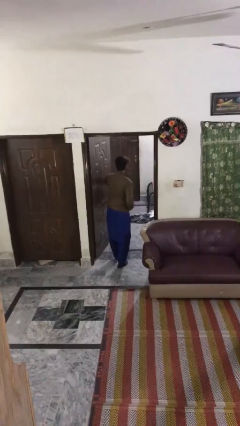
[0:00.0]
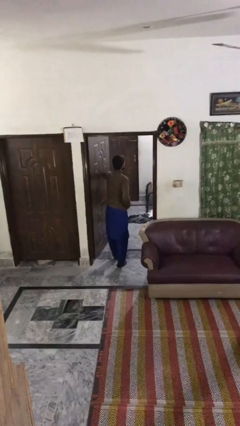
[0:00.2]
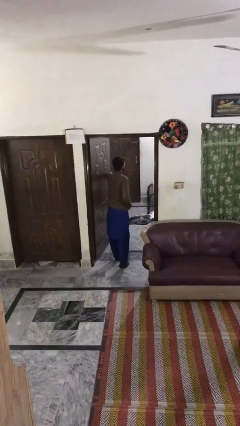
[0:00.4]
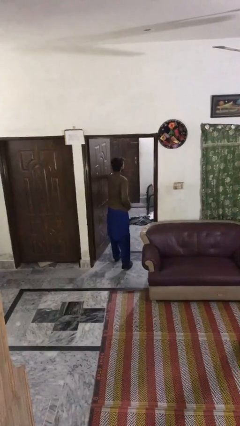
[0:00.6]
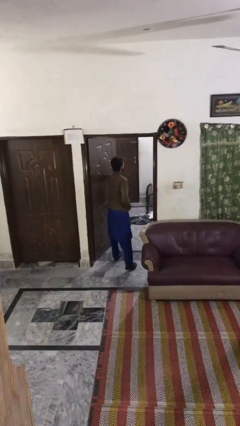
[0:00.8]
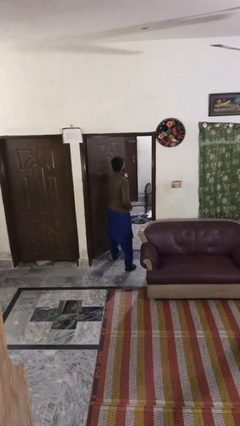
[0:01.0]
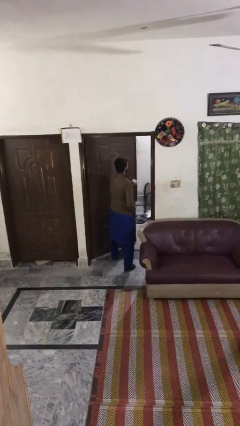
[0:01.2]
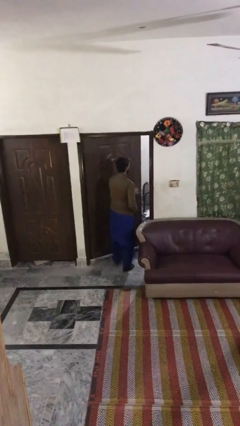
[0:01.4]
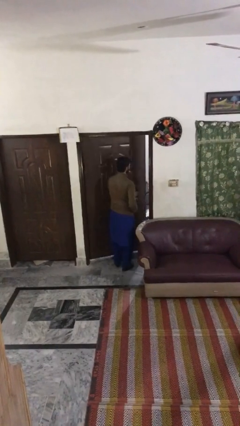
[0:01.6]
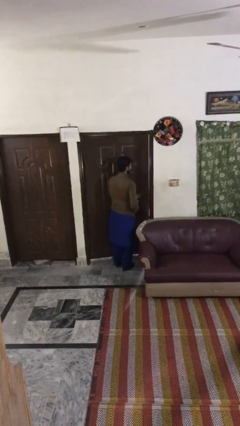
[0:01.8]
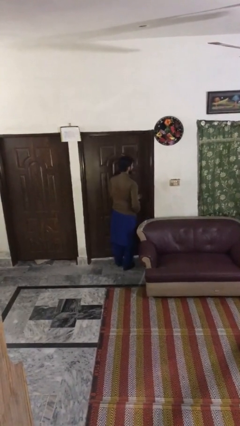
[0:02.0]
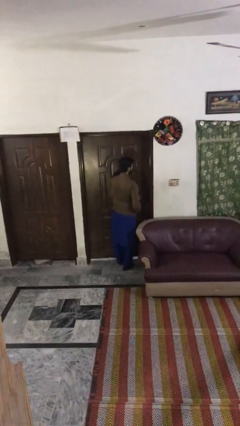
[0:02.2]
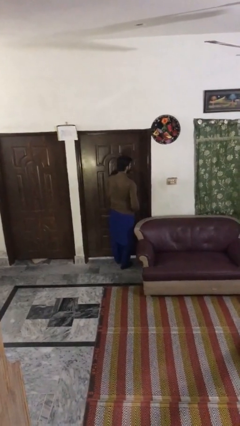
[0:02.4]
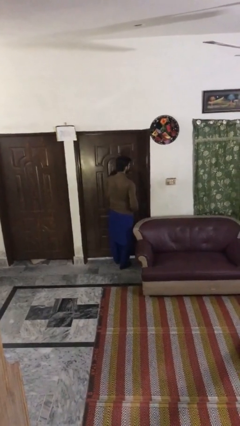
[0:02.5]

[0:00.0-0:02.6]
person closes facility door

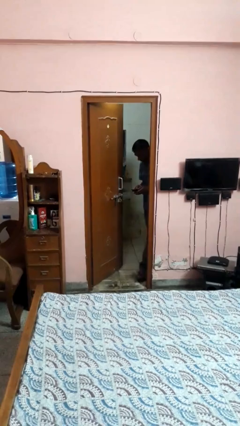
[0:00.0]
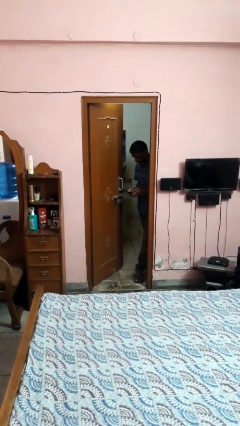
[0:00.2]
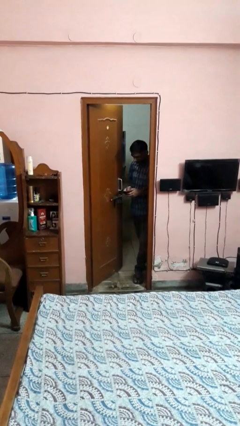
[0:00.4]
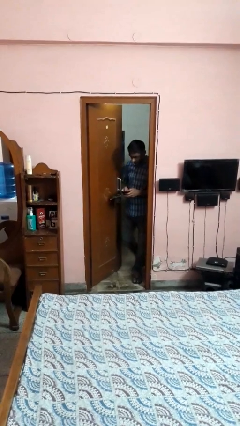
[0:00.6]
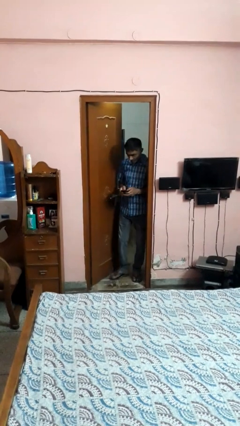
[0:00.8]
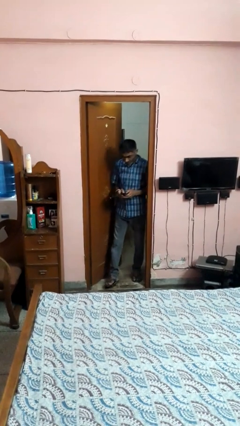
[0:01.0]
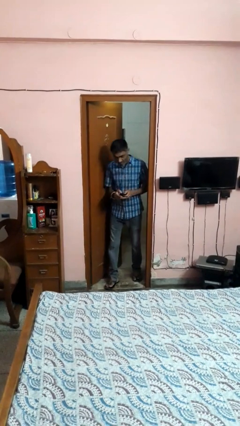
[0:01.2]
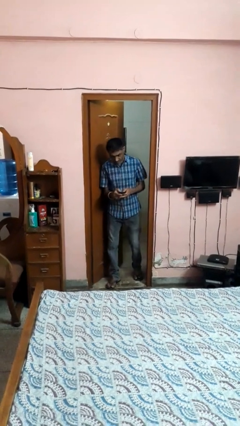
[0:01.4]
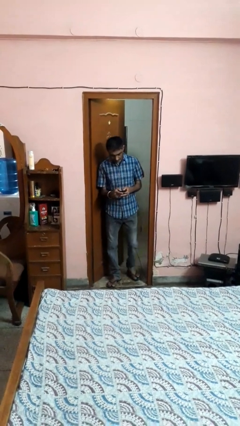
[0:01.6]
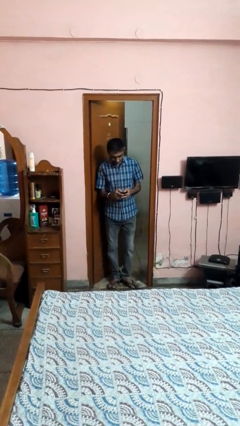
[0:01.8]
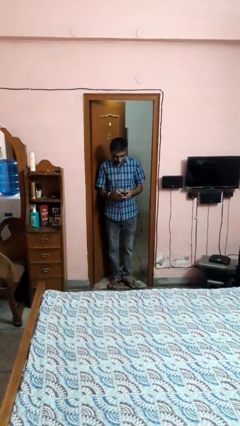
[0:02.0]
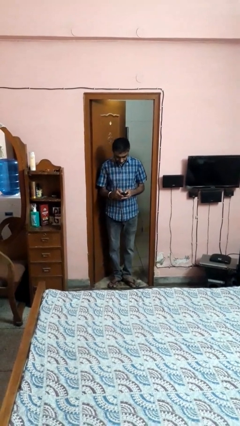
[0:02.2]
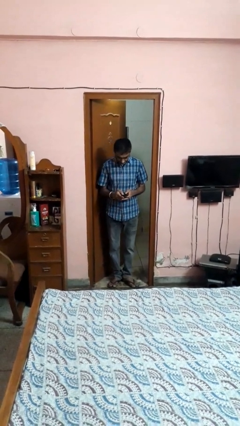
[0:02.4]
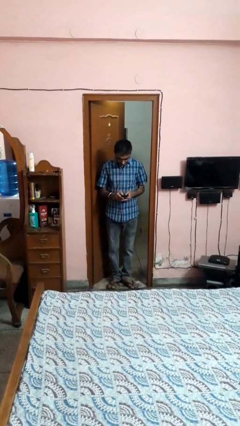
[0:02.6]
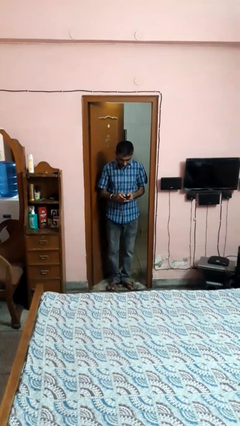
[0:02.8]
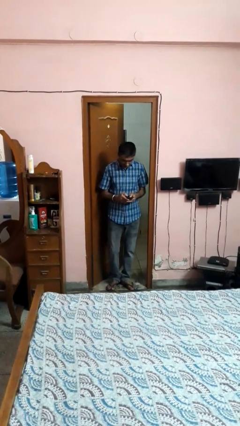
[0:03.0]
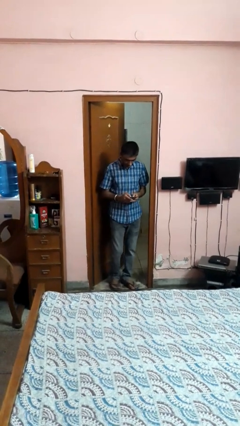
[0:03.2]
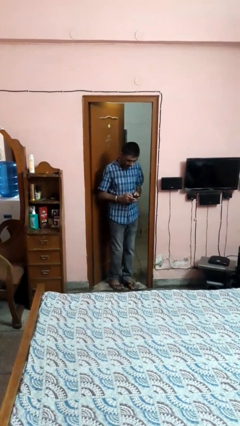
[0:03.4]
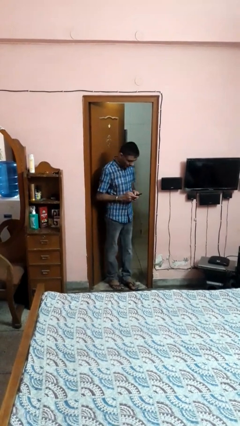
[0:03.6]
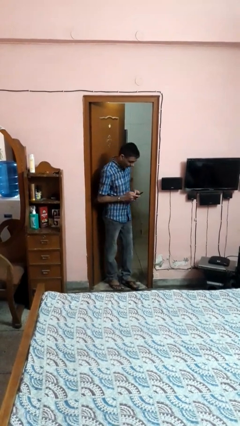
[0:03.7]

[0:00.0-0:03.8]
person enters scene through structure

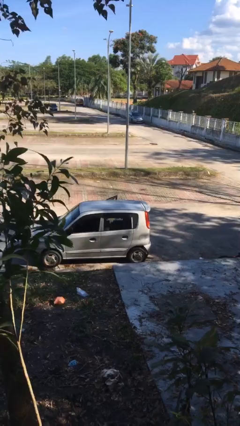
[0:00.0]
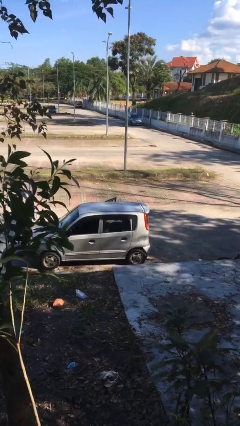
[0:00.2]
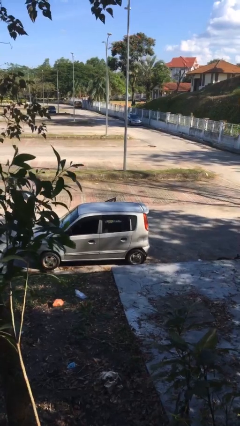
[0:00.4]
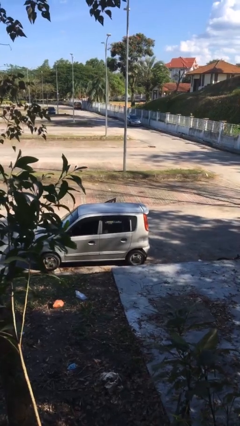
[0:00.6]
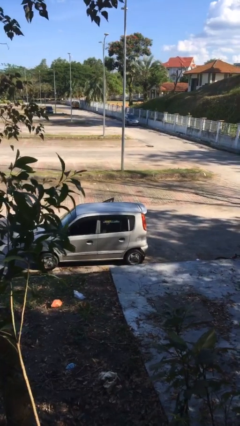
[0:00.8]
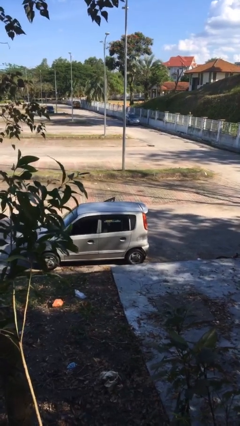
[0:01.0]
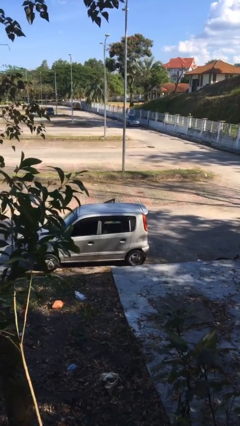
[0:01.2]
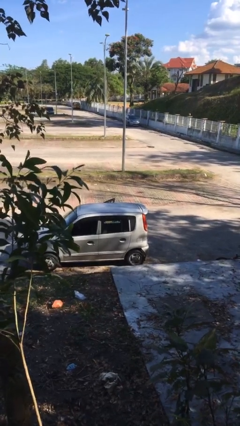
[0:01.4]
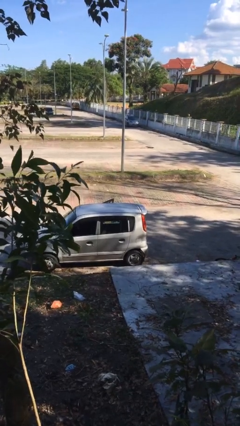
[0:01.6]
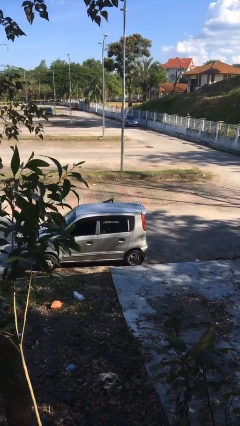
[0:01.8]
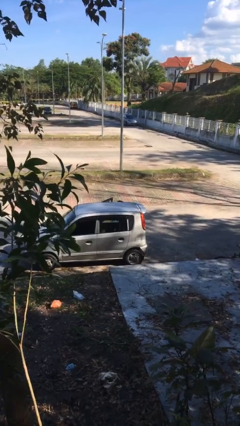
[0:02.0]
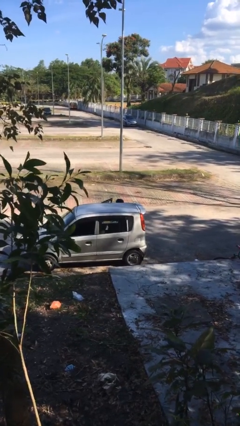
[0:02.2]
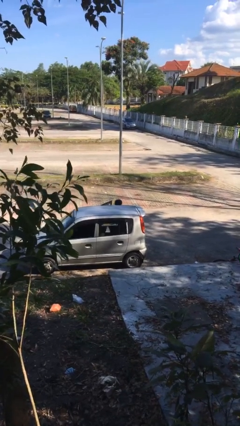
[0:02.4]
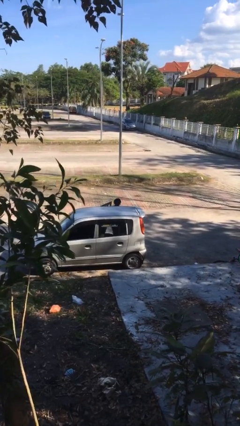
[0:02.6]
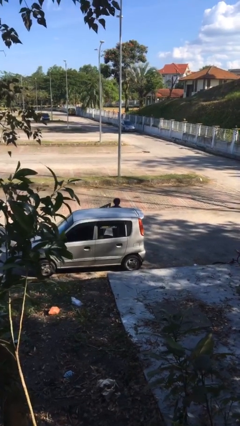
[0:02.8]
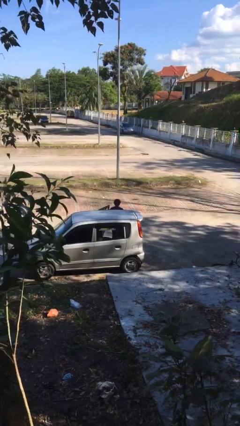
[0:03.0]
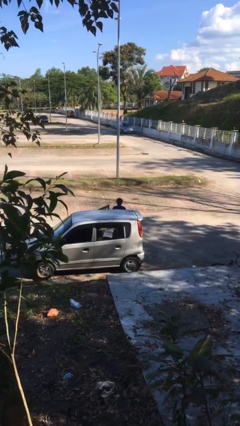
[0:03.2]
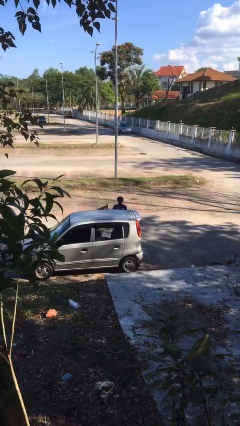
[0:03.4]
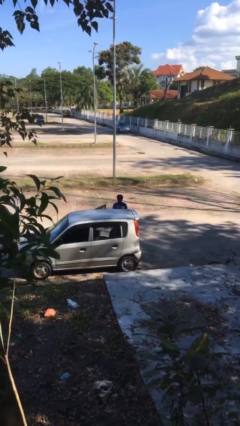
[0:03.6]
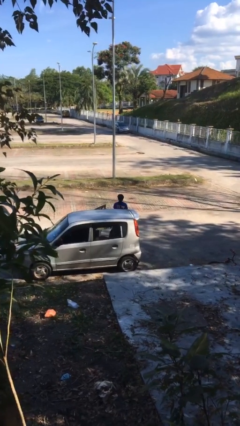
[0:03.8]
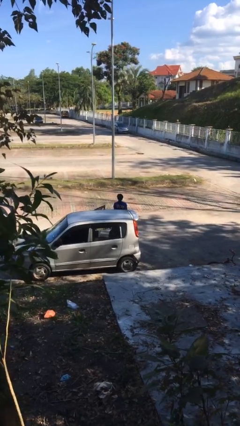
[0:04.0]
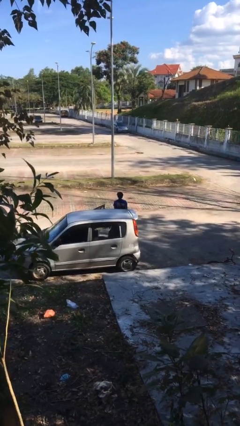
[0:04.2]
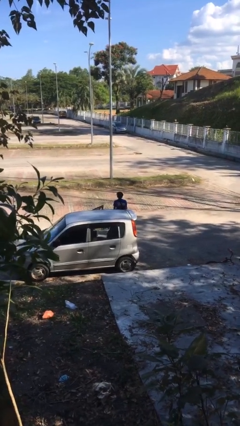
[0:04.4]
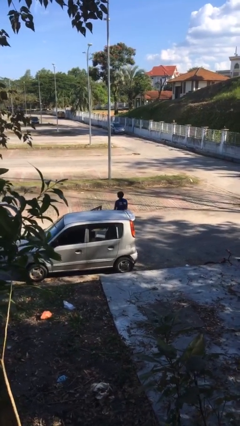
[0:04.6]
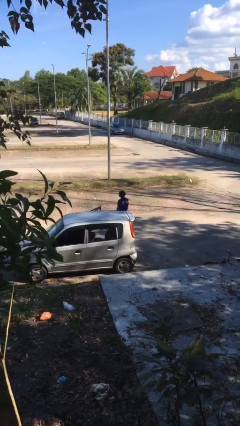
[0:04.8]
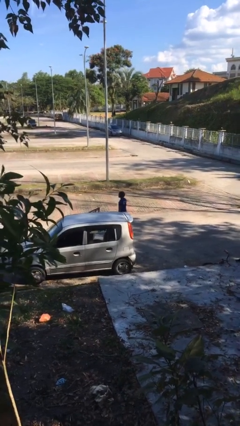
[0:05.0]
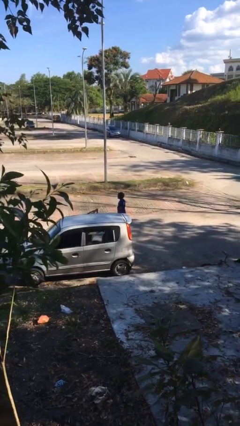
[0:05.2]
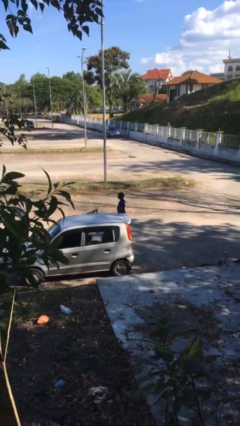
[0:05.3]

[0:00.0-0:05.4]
person exits car

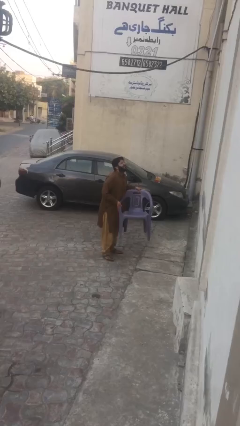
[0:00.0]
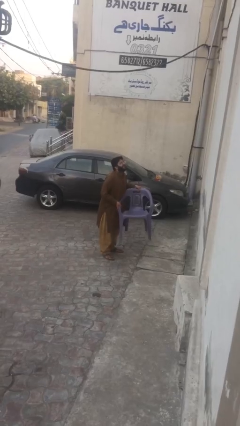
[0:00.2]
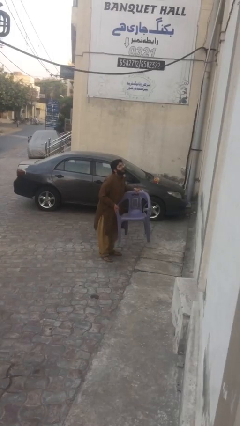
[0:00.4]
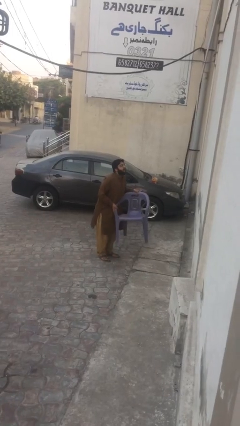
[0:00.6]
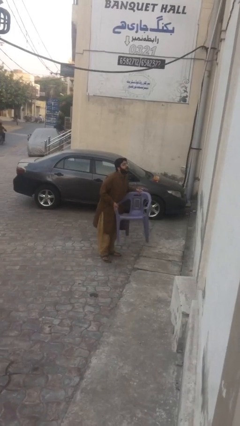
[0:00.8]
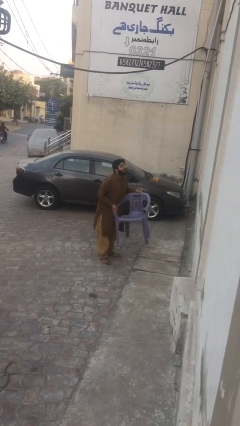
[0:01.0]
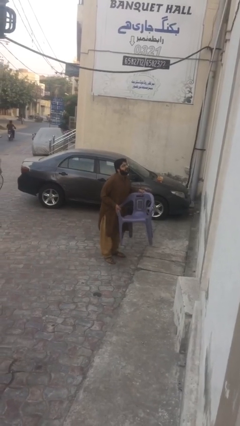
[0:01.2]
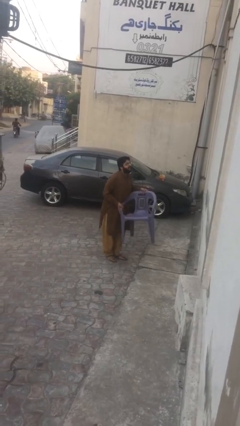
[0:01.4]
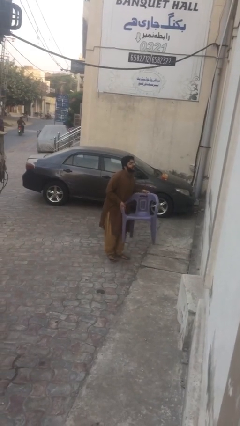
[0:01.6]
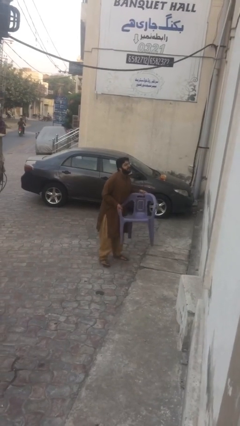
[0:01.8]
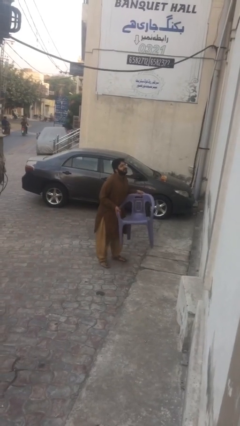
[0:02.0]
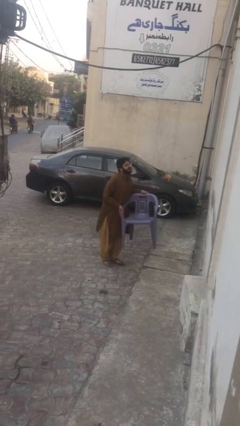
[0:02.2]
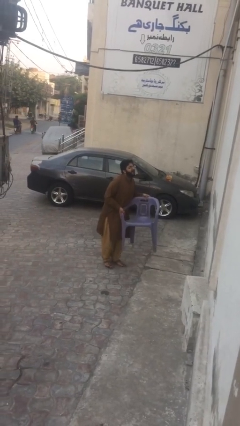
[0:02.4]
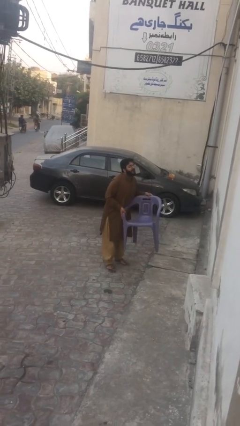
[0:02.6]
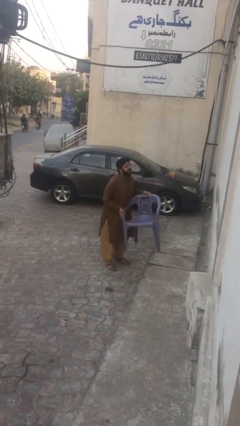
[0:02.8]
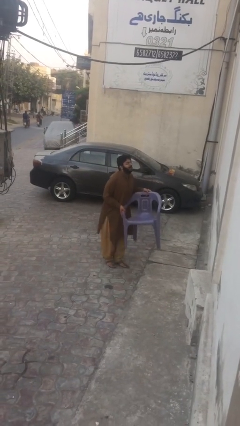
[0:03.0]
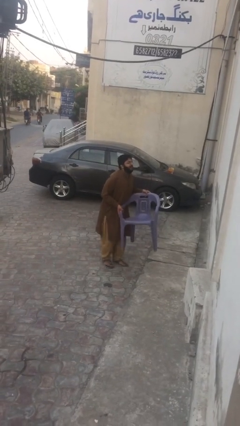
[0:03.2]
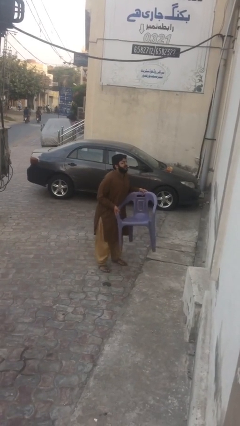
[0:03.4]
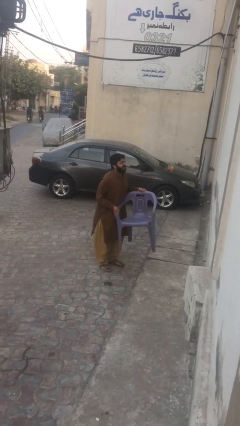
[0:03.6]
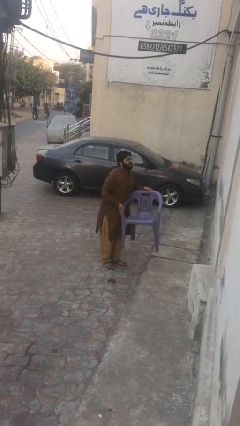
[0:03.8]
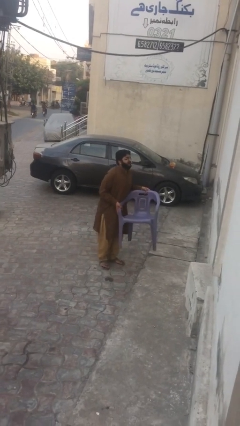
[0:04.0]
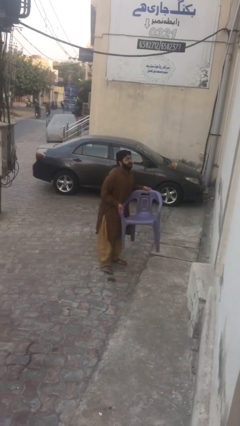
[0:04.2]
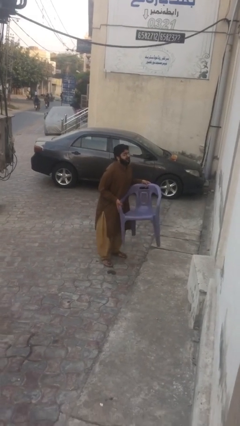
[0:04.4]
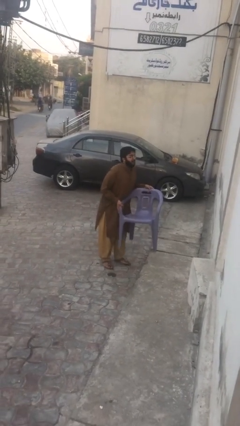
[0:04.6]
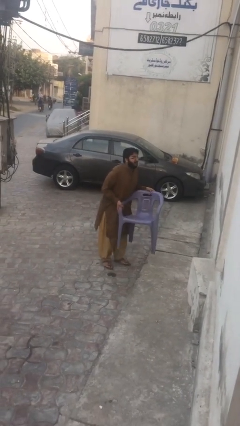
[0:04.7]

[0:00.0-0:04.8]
person carries heavy object

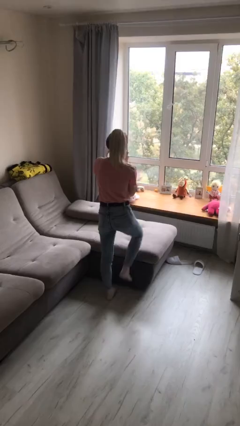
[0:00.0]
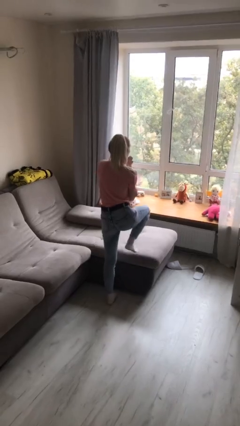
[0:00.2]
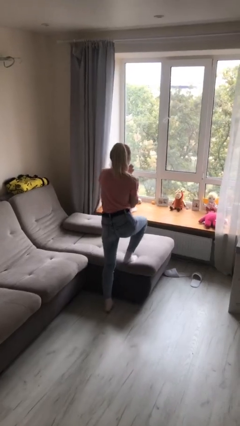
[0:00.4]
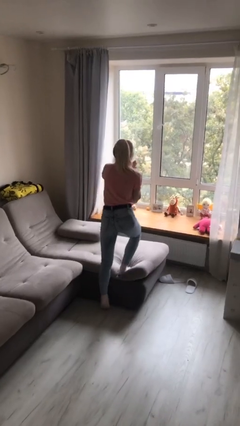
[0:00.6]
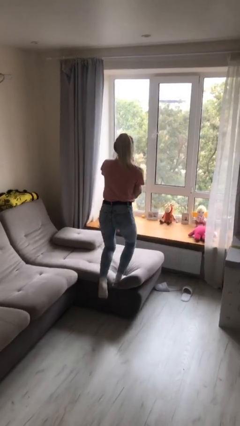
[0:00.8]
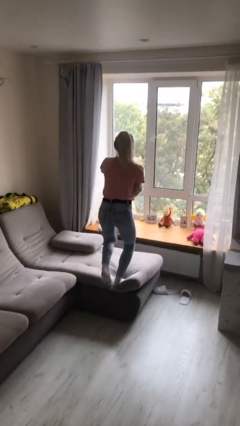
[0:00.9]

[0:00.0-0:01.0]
person climbs on couch

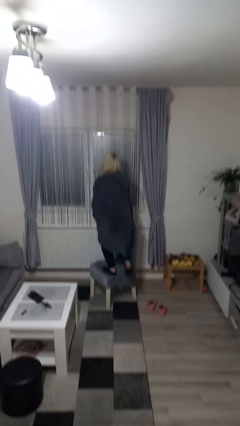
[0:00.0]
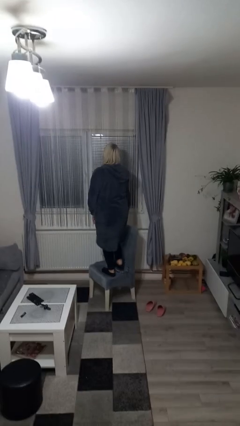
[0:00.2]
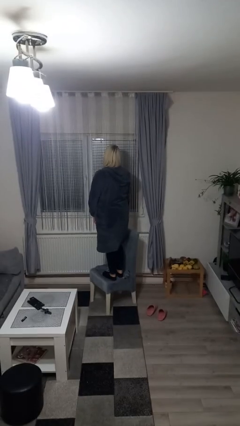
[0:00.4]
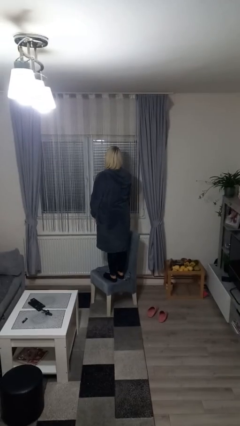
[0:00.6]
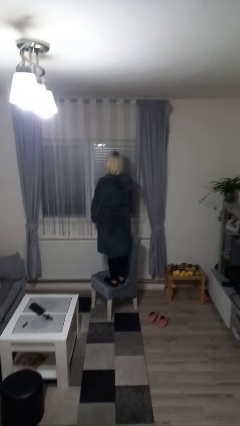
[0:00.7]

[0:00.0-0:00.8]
person climbs on chair
